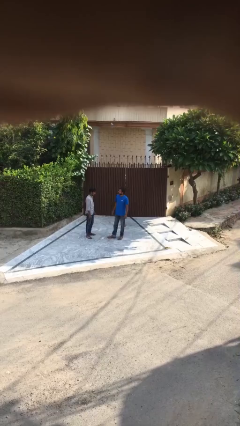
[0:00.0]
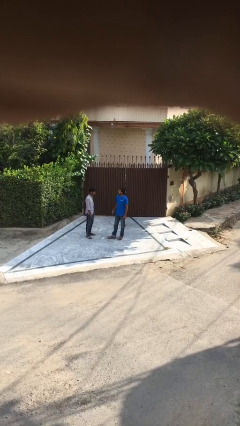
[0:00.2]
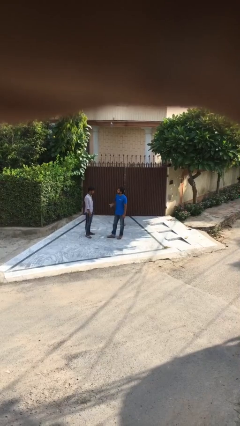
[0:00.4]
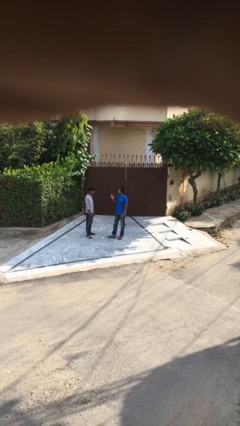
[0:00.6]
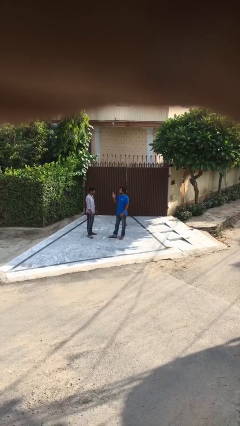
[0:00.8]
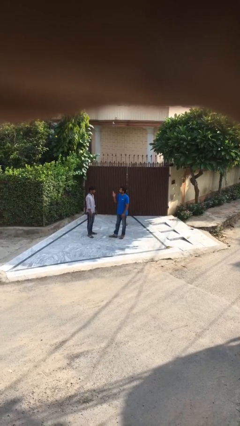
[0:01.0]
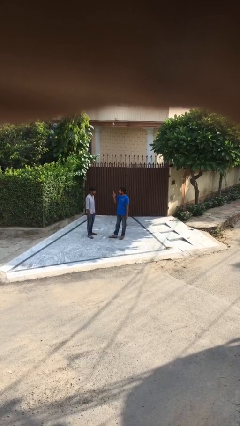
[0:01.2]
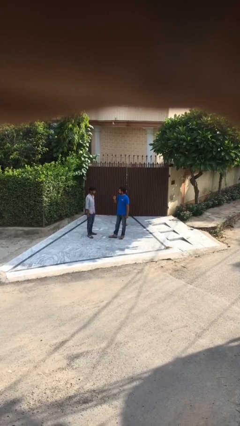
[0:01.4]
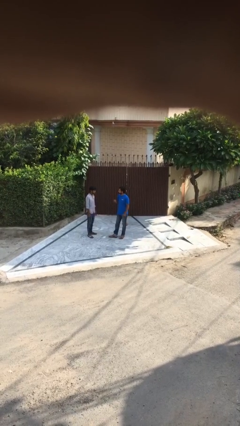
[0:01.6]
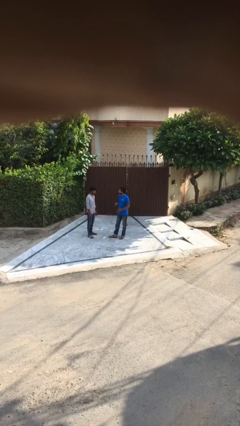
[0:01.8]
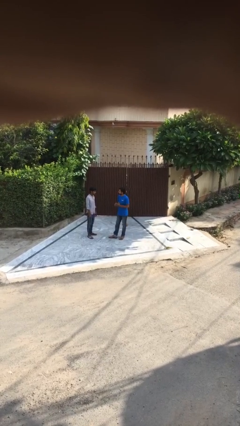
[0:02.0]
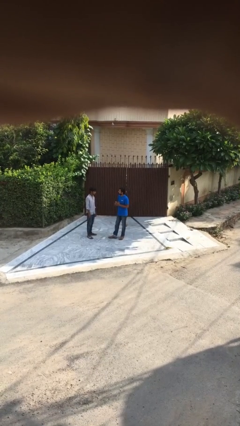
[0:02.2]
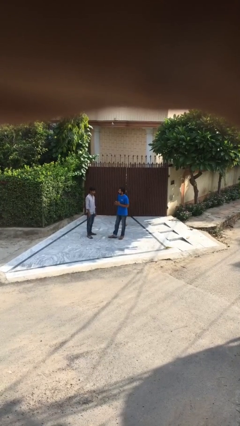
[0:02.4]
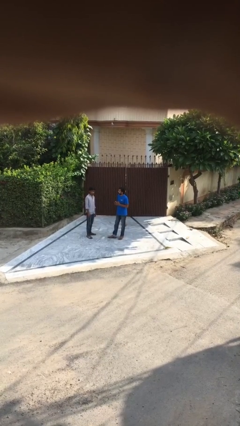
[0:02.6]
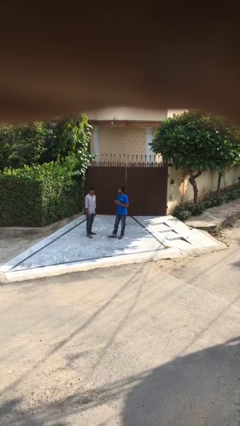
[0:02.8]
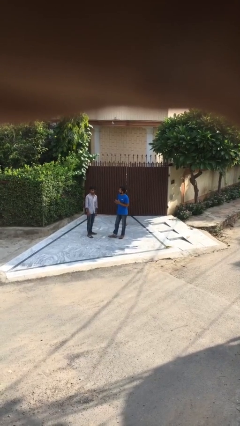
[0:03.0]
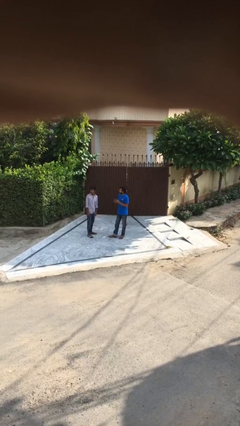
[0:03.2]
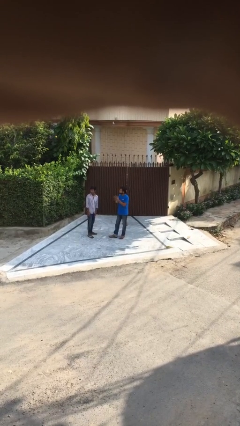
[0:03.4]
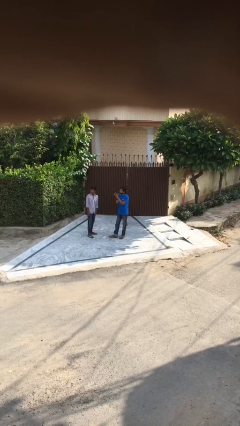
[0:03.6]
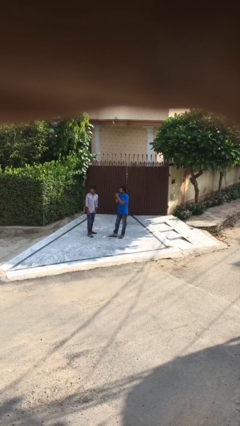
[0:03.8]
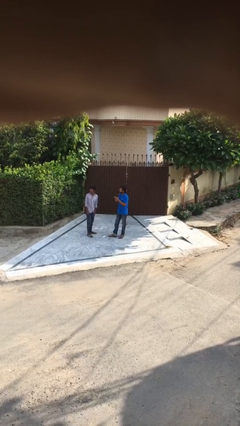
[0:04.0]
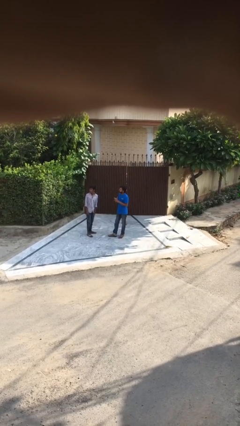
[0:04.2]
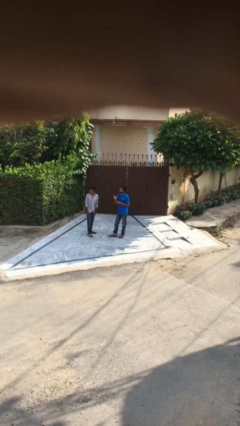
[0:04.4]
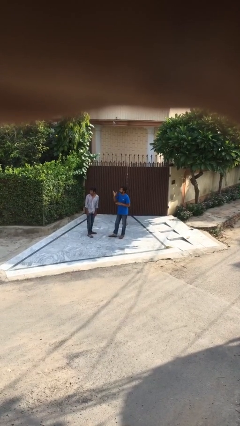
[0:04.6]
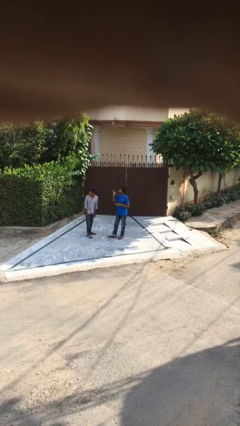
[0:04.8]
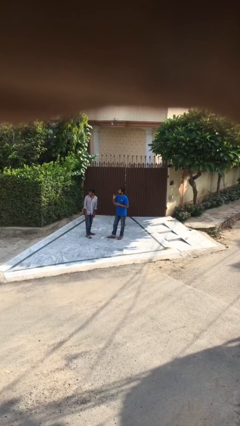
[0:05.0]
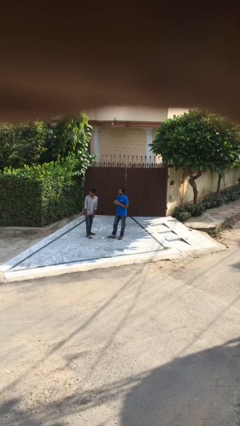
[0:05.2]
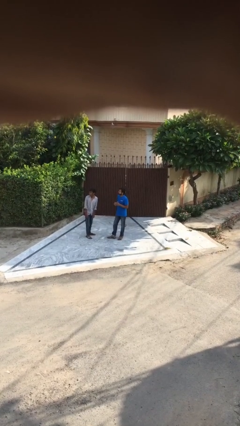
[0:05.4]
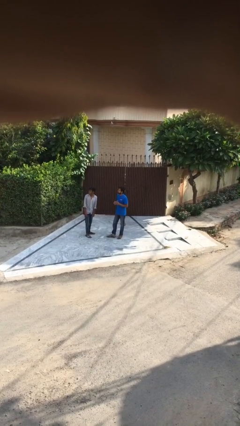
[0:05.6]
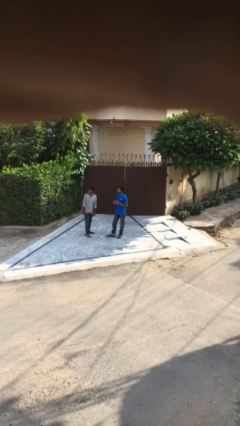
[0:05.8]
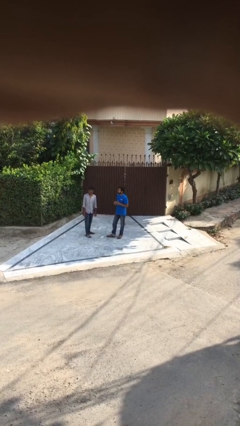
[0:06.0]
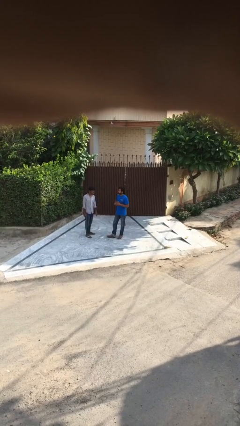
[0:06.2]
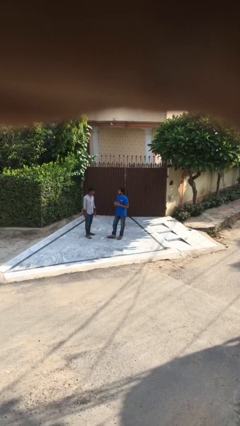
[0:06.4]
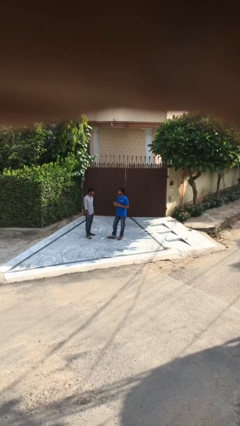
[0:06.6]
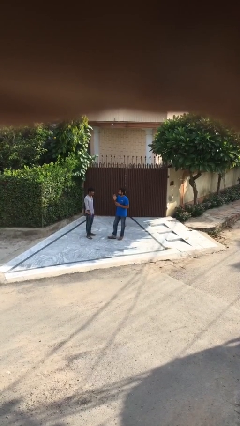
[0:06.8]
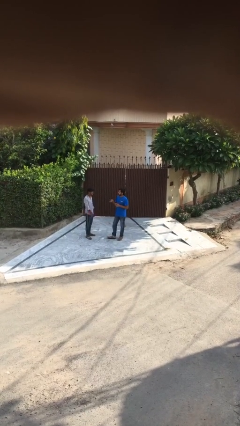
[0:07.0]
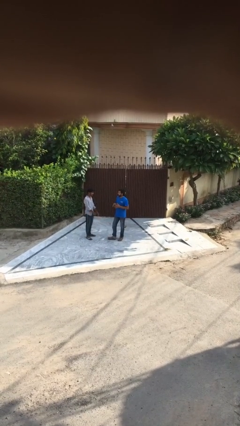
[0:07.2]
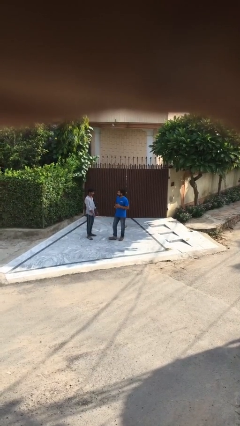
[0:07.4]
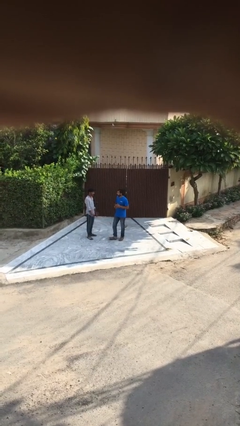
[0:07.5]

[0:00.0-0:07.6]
person talks to person

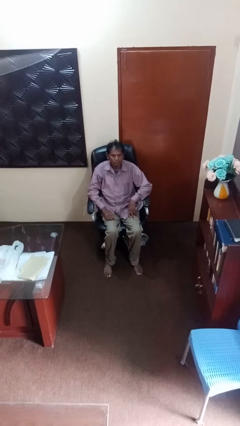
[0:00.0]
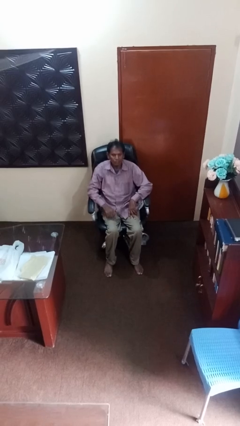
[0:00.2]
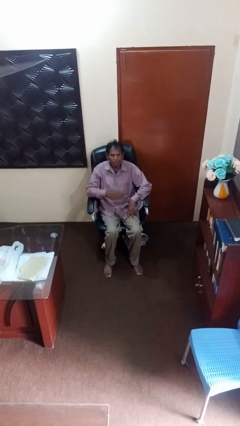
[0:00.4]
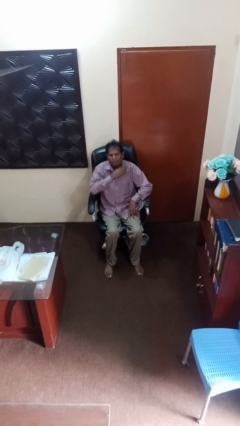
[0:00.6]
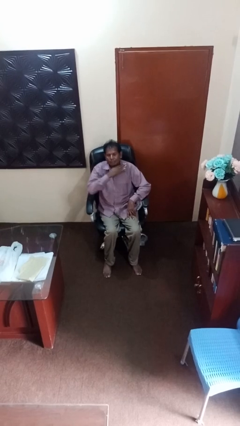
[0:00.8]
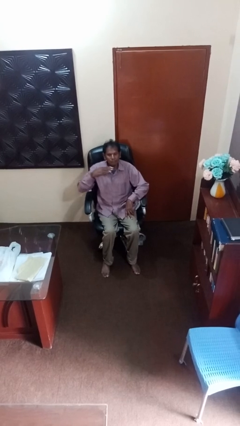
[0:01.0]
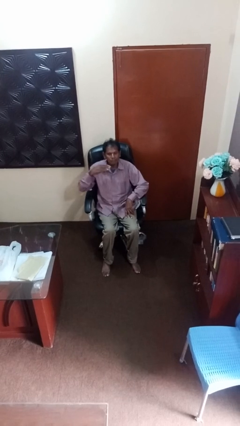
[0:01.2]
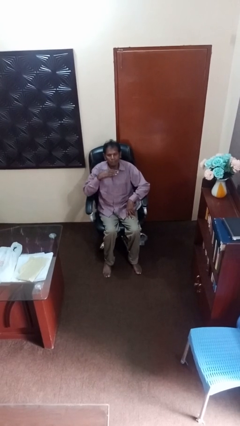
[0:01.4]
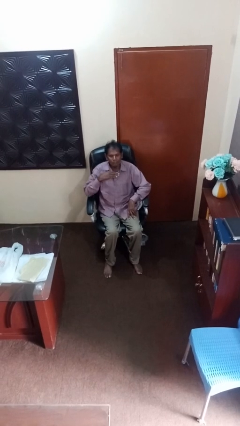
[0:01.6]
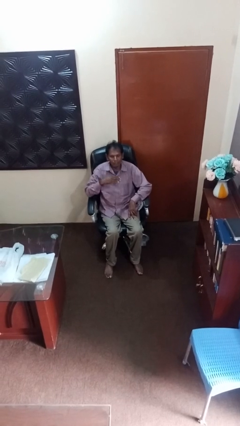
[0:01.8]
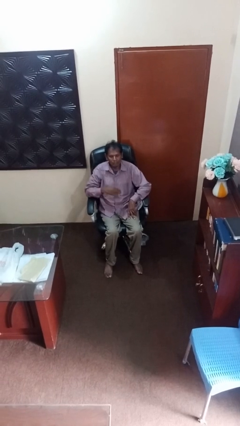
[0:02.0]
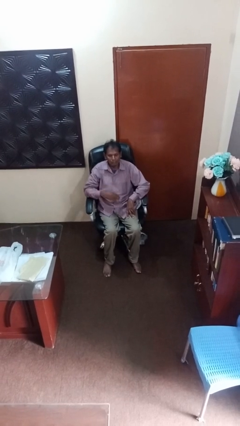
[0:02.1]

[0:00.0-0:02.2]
person gestures cut

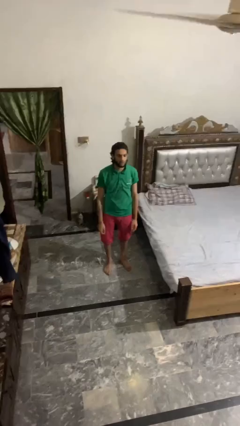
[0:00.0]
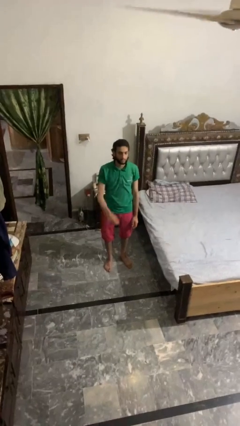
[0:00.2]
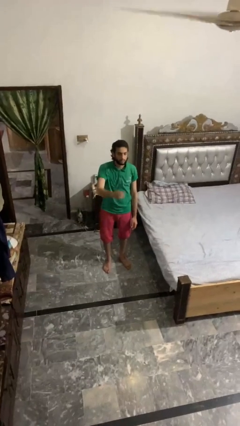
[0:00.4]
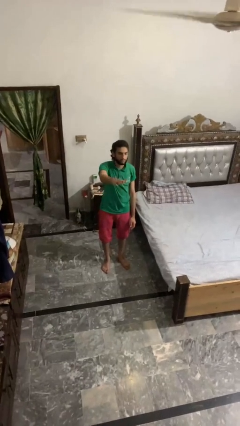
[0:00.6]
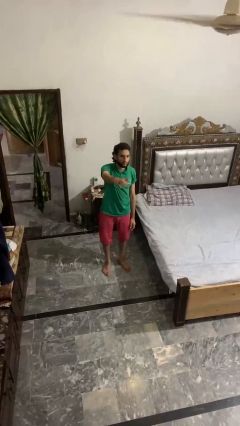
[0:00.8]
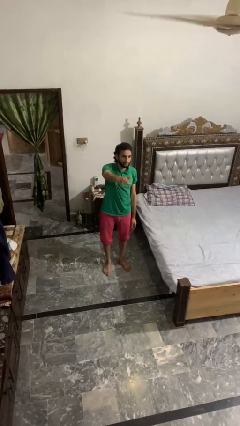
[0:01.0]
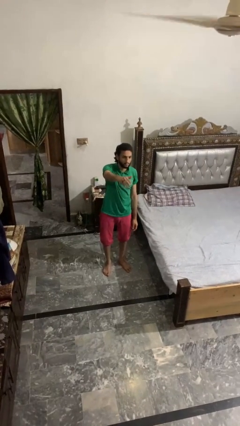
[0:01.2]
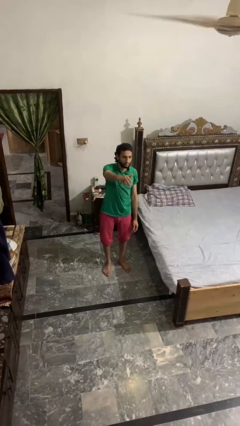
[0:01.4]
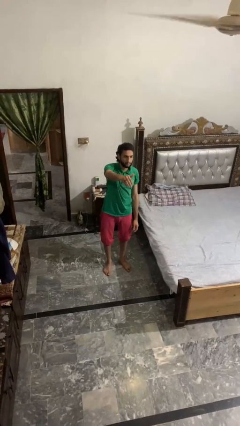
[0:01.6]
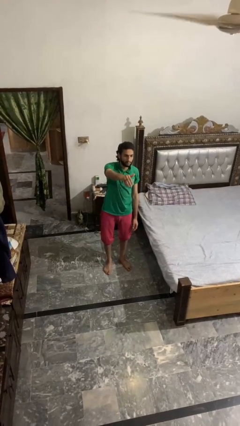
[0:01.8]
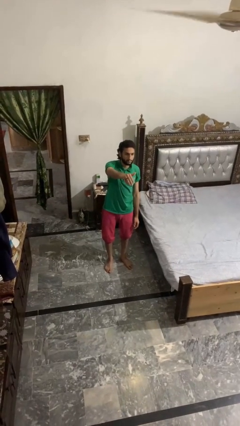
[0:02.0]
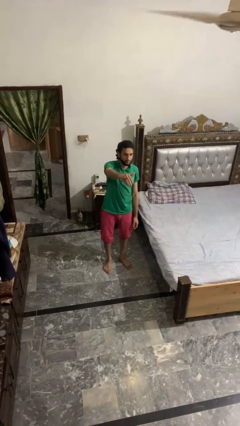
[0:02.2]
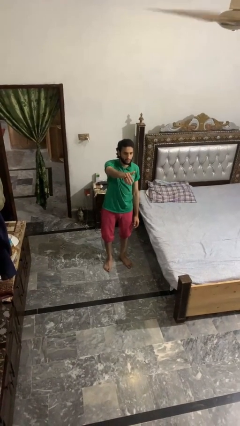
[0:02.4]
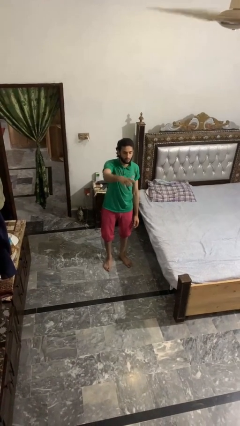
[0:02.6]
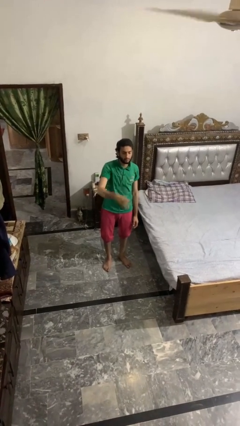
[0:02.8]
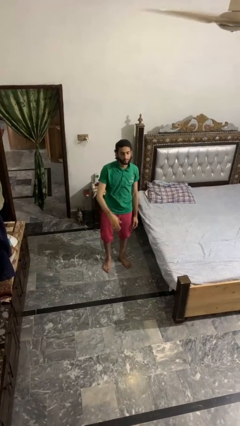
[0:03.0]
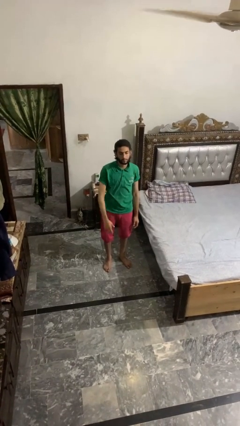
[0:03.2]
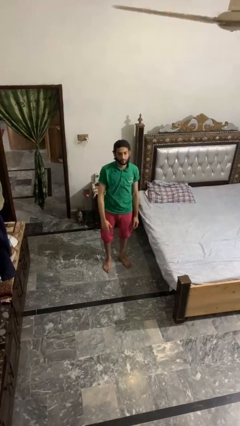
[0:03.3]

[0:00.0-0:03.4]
person gestures come here

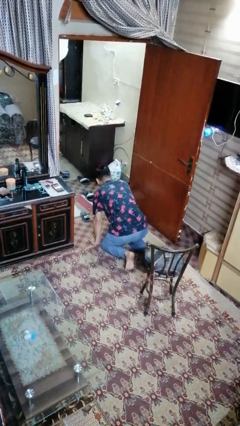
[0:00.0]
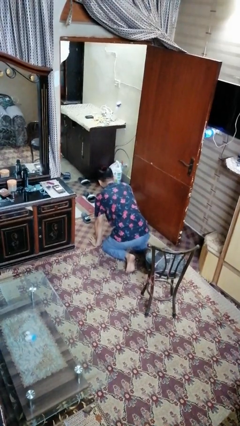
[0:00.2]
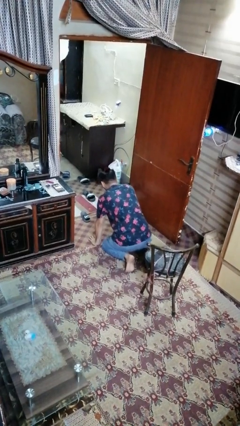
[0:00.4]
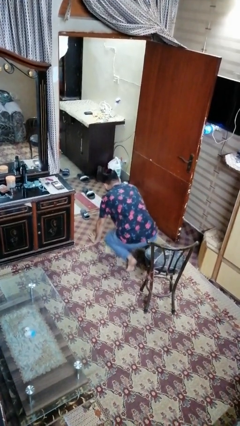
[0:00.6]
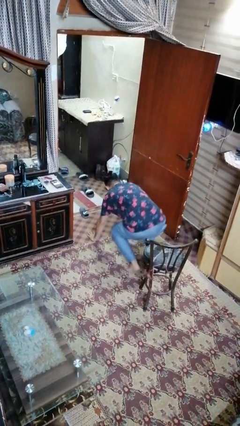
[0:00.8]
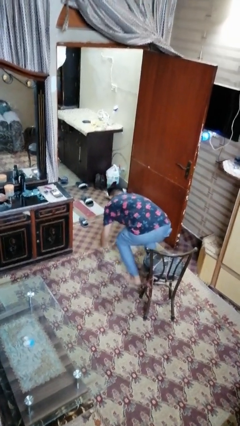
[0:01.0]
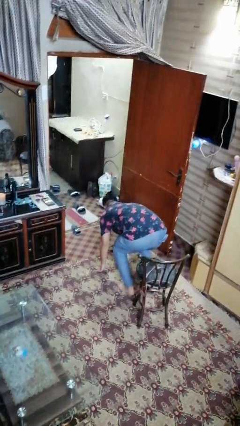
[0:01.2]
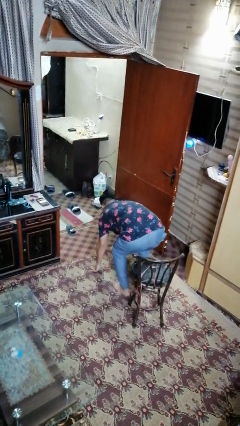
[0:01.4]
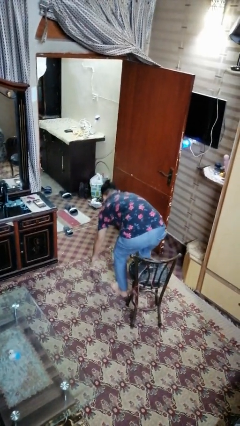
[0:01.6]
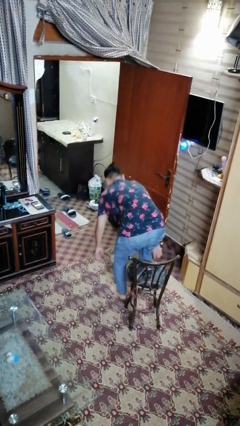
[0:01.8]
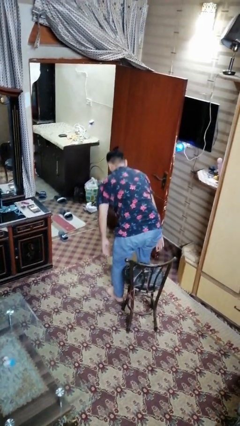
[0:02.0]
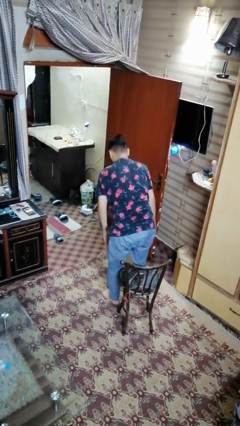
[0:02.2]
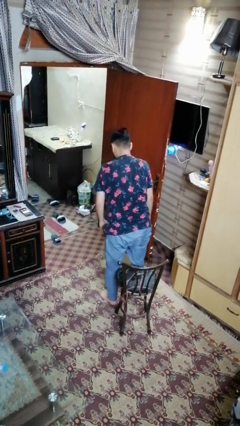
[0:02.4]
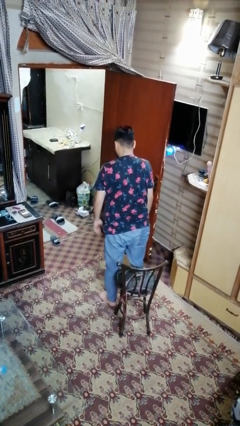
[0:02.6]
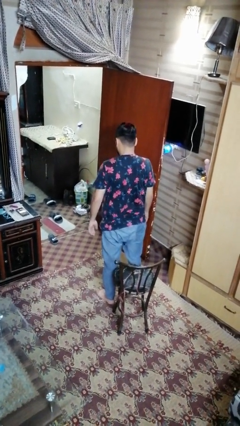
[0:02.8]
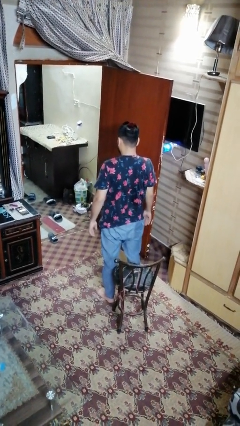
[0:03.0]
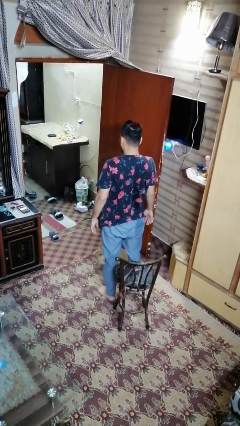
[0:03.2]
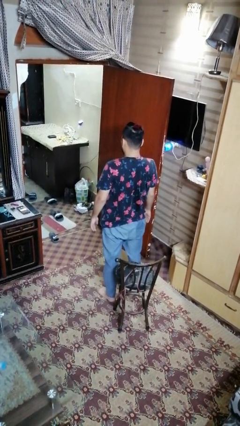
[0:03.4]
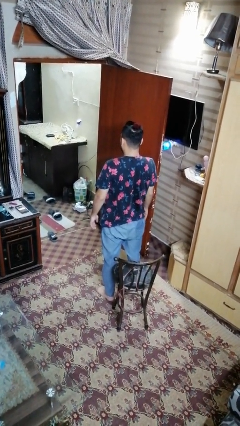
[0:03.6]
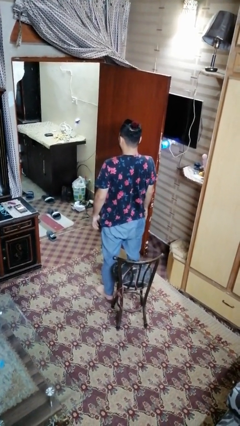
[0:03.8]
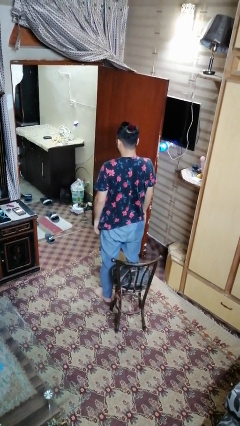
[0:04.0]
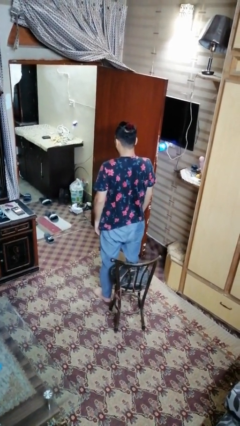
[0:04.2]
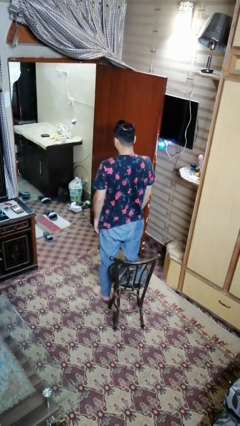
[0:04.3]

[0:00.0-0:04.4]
person stands up from floor

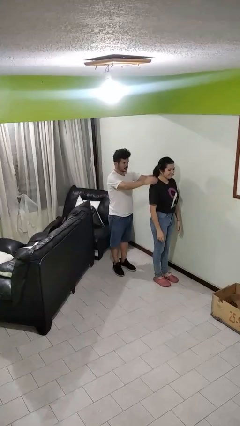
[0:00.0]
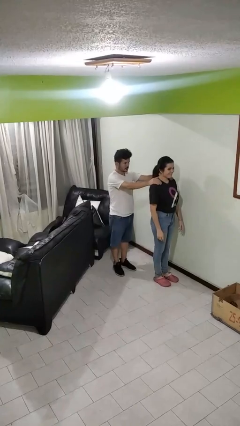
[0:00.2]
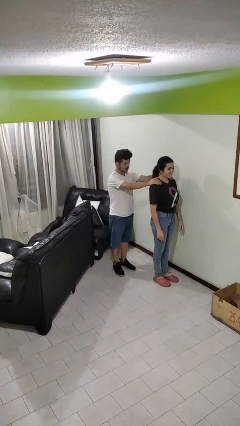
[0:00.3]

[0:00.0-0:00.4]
person grabs person by shoulder
